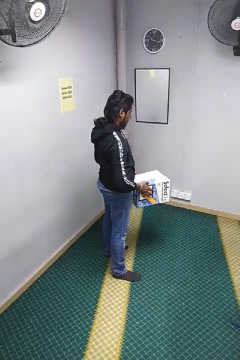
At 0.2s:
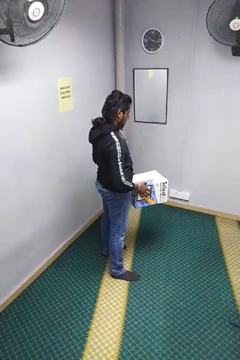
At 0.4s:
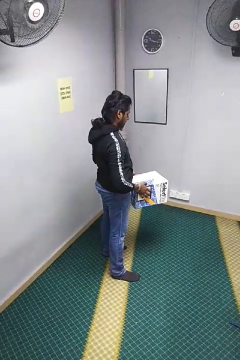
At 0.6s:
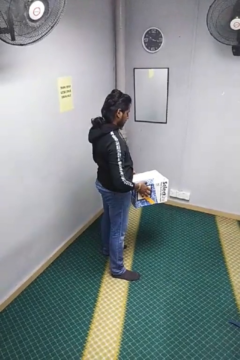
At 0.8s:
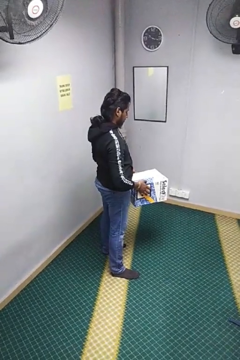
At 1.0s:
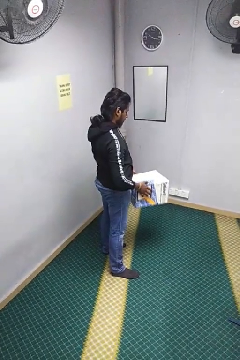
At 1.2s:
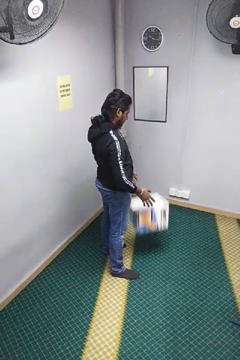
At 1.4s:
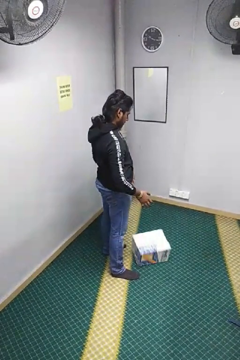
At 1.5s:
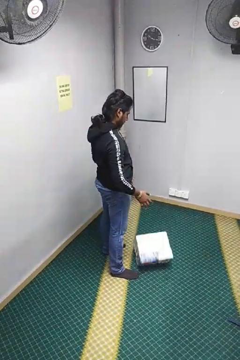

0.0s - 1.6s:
person drops object

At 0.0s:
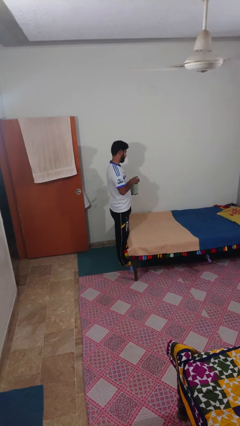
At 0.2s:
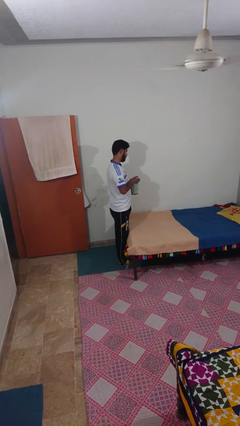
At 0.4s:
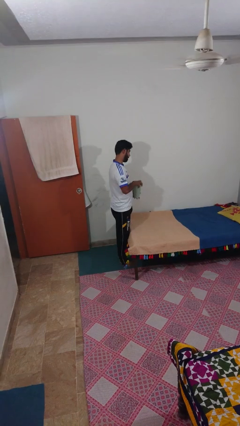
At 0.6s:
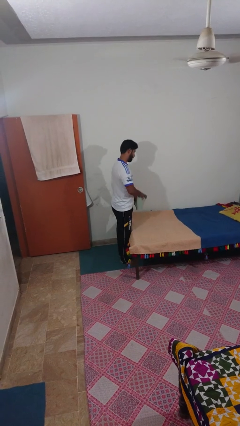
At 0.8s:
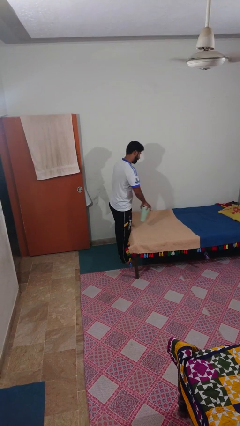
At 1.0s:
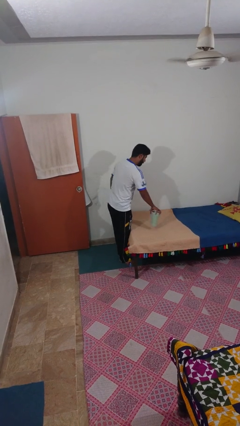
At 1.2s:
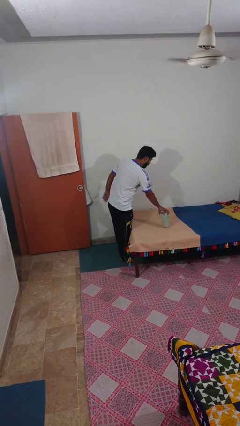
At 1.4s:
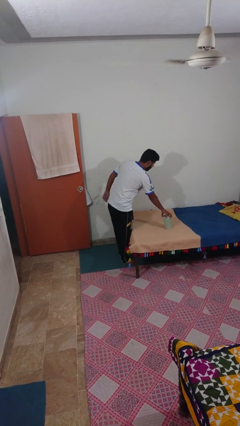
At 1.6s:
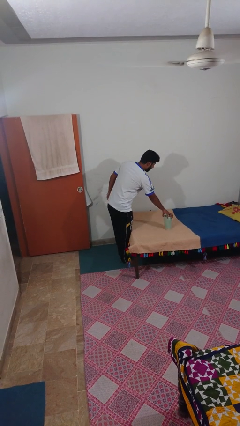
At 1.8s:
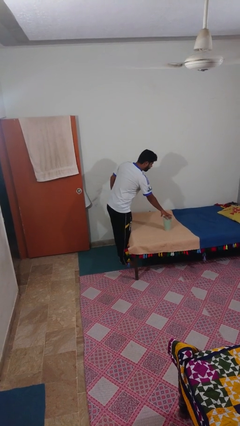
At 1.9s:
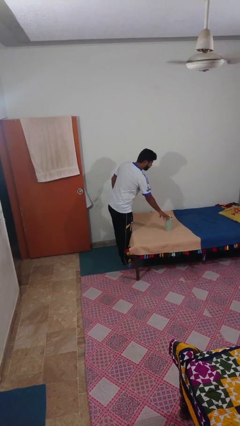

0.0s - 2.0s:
person puts down object on bed

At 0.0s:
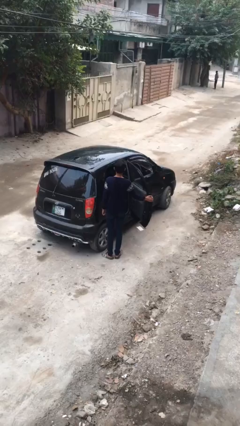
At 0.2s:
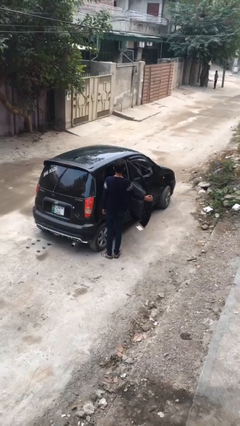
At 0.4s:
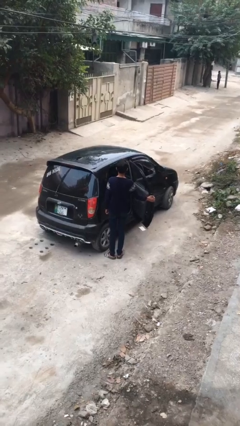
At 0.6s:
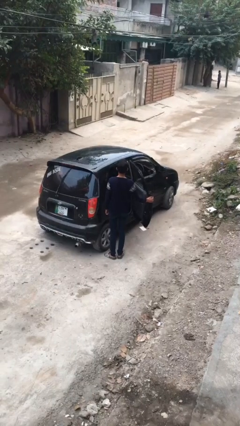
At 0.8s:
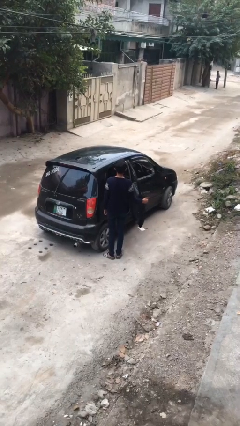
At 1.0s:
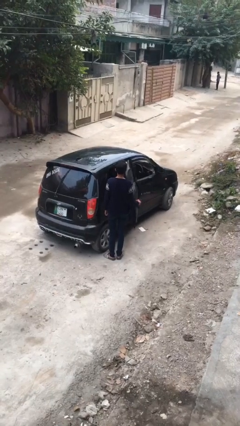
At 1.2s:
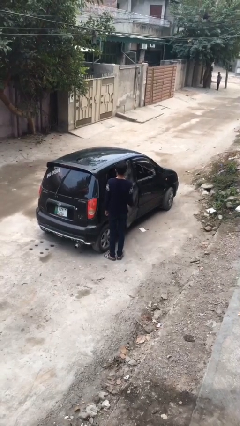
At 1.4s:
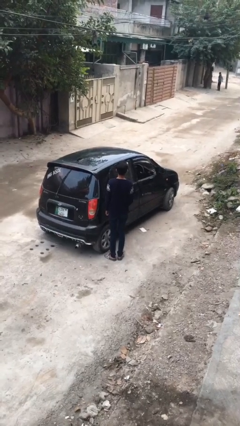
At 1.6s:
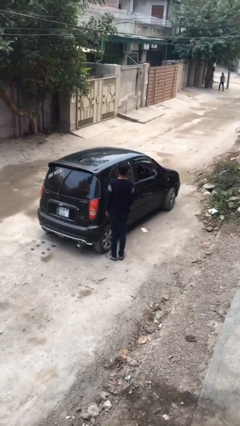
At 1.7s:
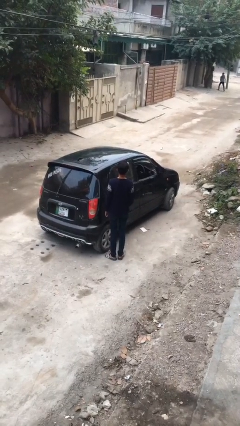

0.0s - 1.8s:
person closes car door

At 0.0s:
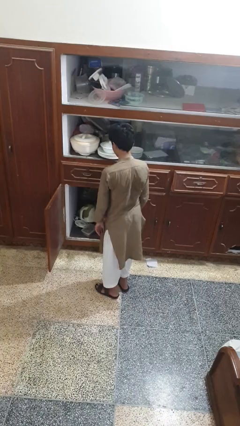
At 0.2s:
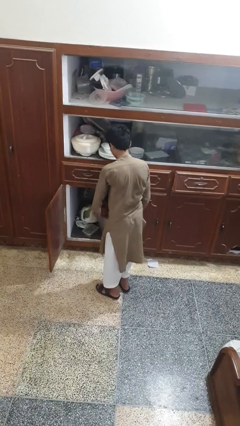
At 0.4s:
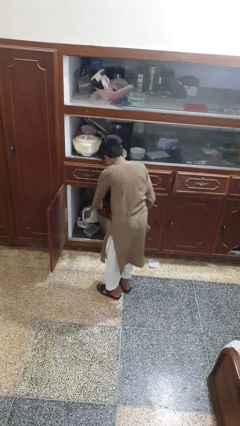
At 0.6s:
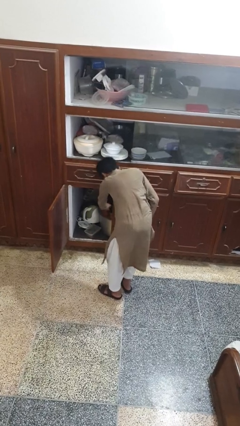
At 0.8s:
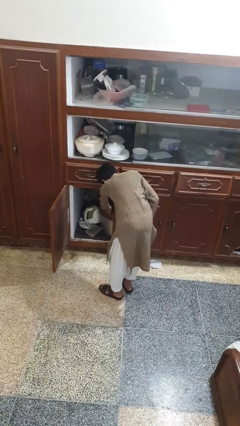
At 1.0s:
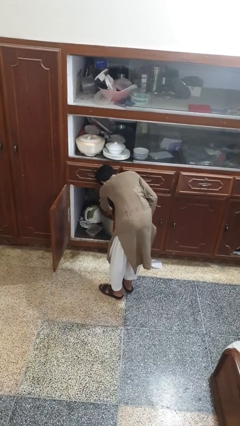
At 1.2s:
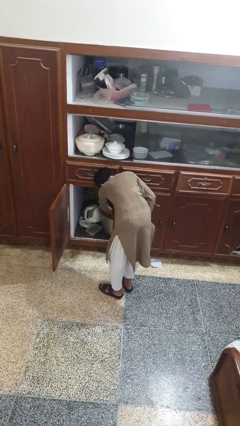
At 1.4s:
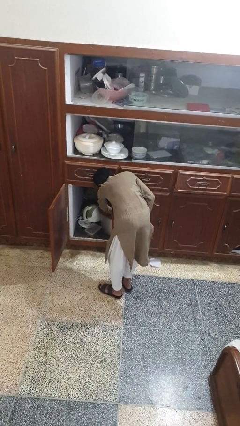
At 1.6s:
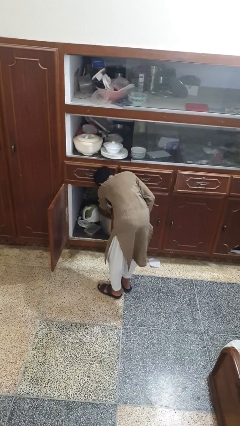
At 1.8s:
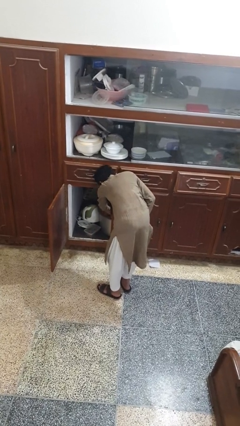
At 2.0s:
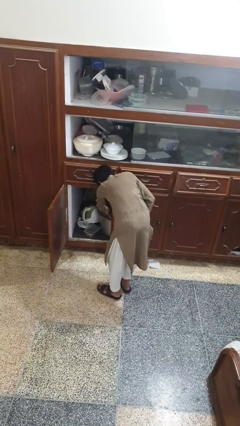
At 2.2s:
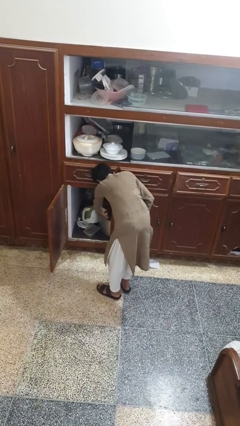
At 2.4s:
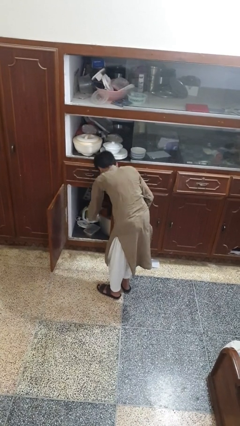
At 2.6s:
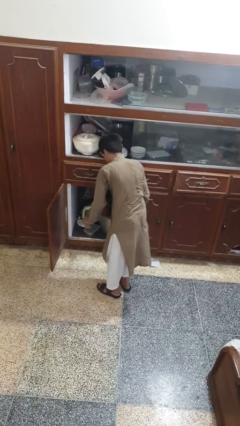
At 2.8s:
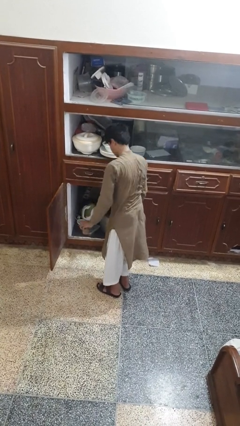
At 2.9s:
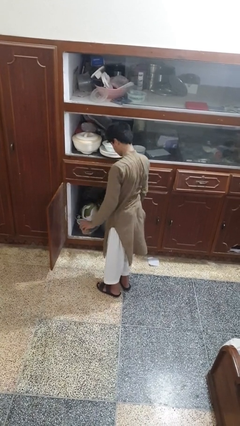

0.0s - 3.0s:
person takes object from cabinet

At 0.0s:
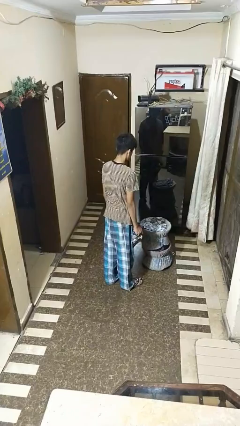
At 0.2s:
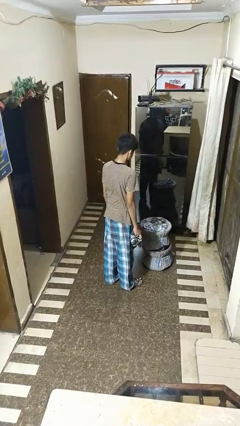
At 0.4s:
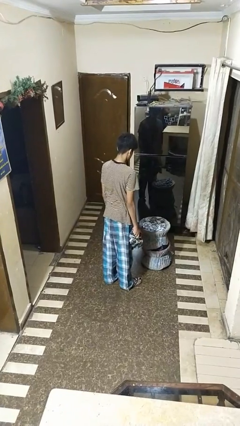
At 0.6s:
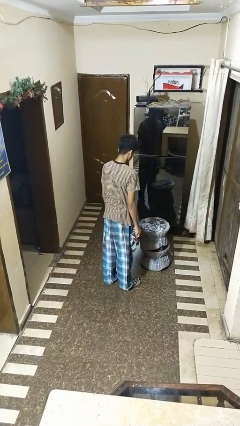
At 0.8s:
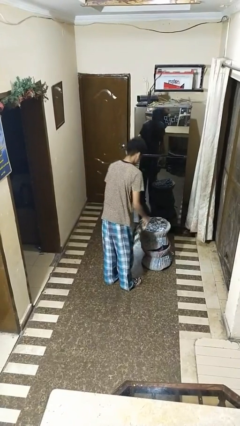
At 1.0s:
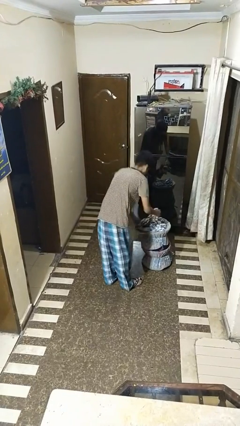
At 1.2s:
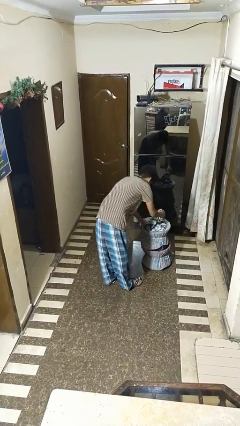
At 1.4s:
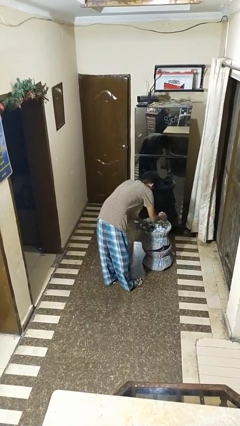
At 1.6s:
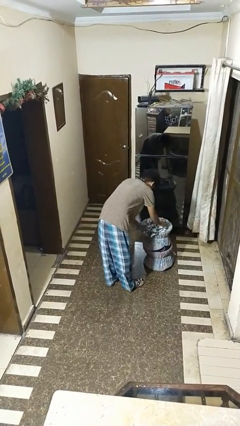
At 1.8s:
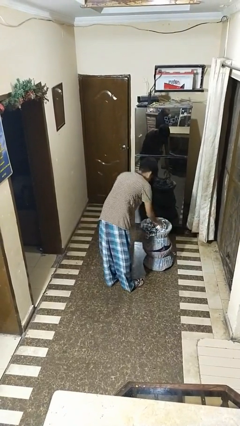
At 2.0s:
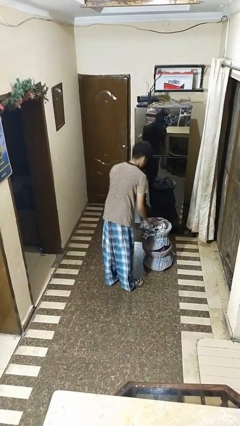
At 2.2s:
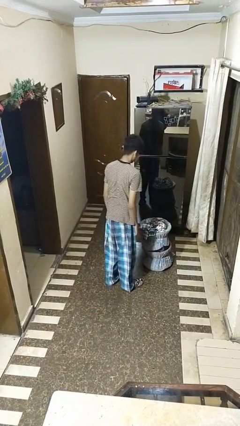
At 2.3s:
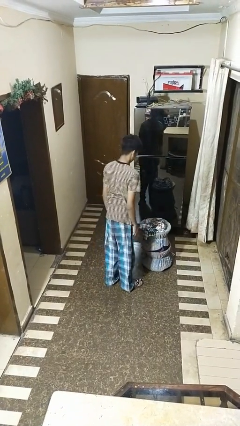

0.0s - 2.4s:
person puts object into basket

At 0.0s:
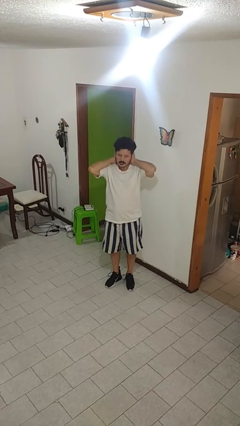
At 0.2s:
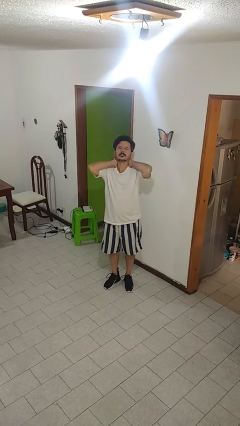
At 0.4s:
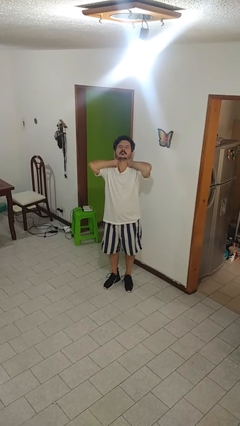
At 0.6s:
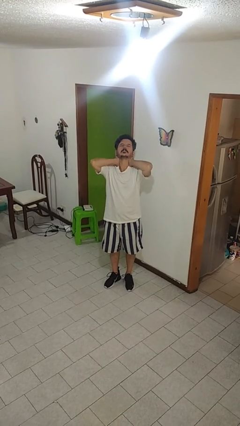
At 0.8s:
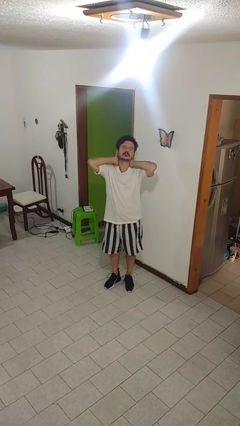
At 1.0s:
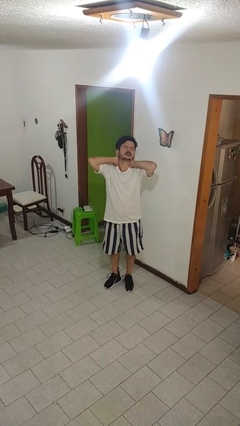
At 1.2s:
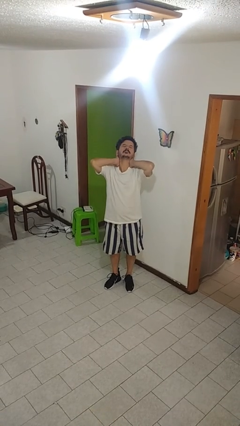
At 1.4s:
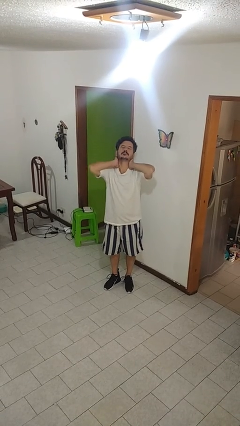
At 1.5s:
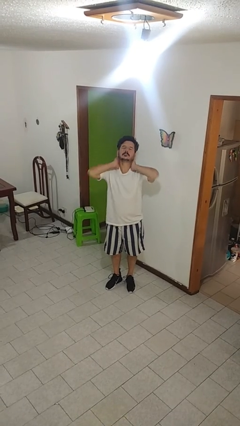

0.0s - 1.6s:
person rubs neck

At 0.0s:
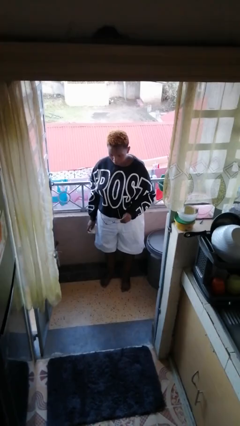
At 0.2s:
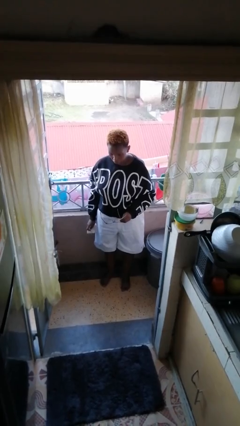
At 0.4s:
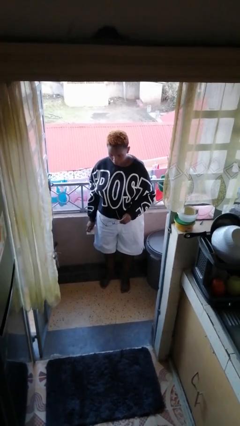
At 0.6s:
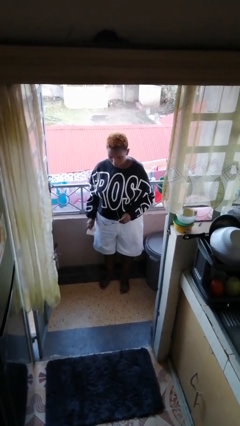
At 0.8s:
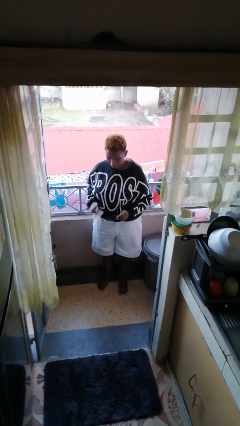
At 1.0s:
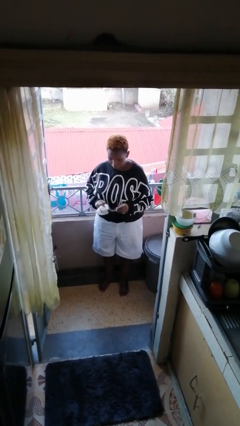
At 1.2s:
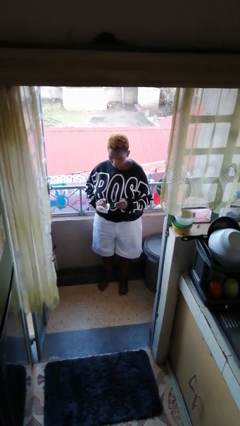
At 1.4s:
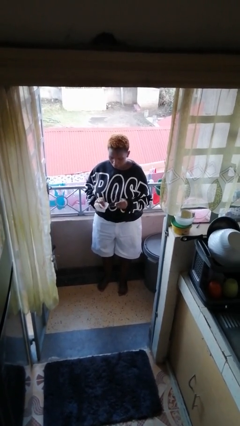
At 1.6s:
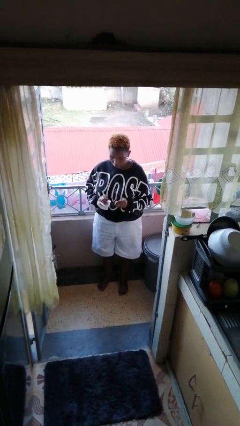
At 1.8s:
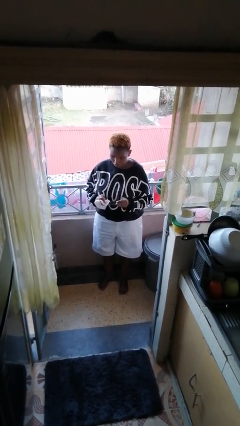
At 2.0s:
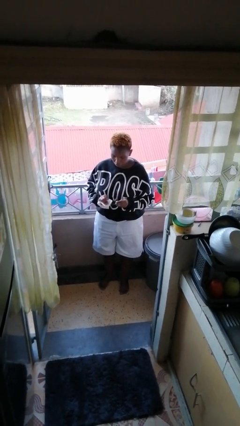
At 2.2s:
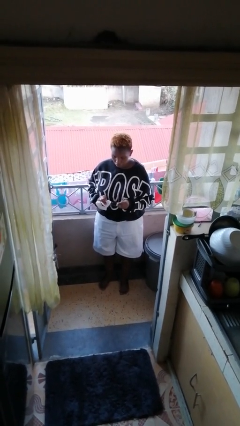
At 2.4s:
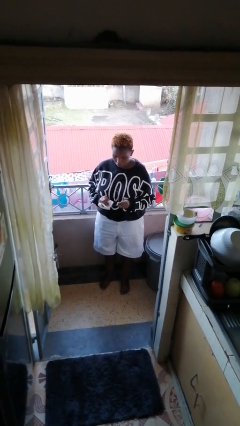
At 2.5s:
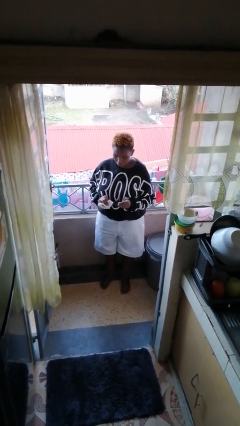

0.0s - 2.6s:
person cleans eyeglasses

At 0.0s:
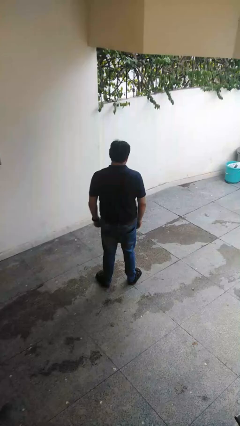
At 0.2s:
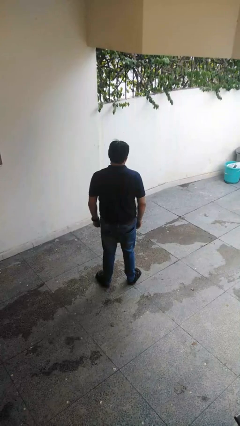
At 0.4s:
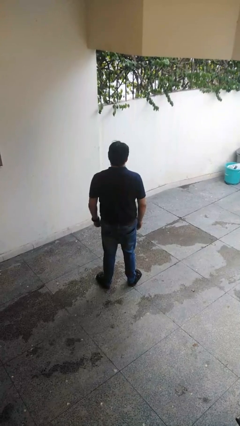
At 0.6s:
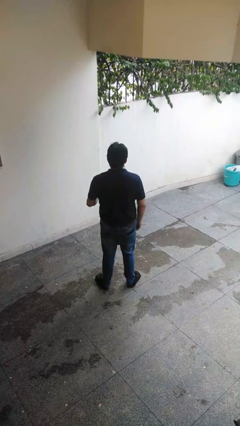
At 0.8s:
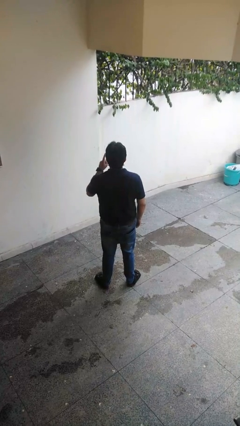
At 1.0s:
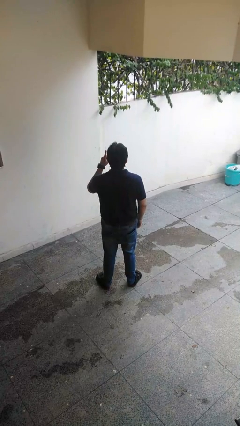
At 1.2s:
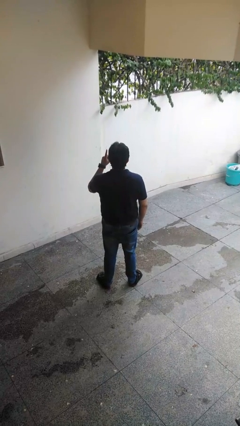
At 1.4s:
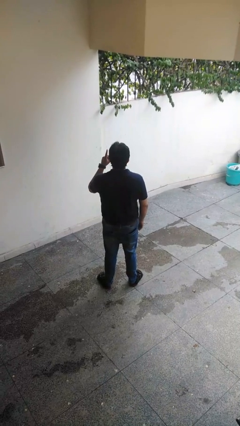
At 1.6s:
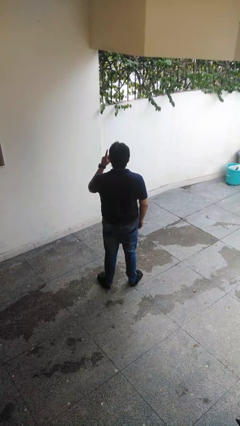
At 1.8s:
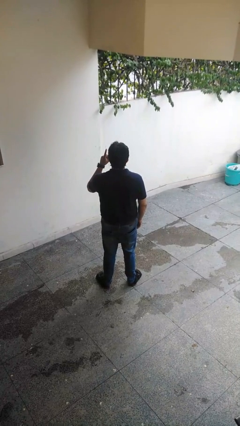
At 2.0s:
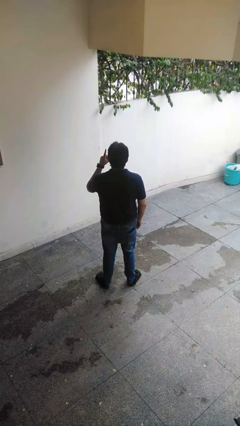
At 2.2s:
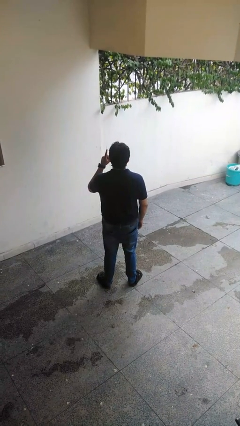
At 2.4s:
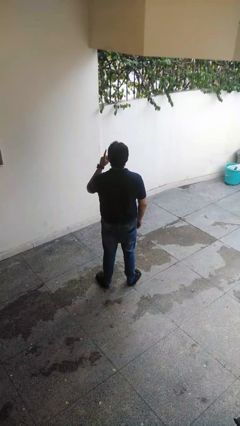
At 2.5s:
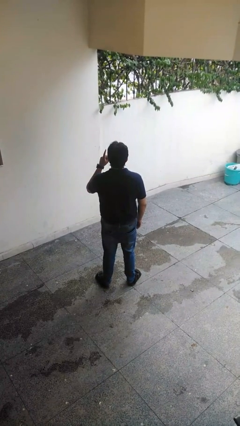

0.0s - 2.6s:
person gestures number one
